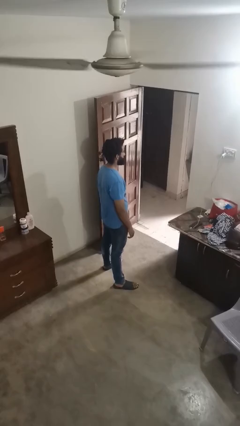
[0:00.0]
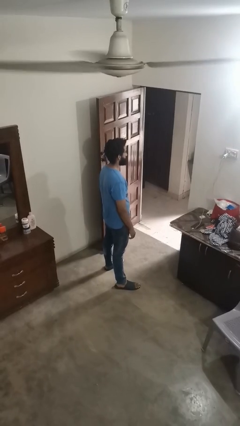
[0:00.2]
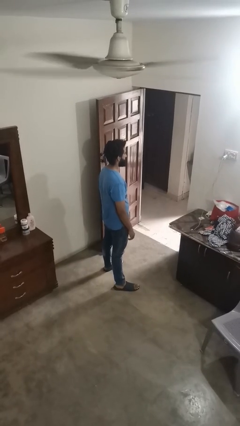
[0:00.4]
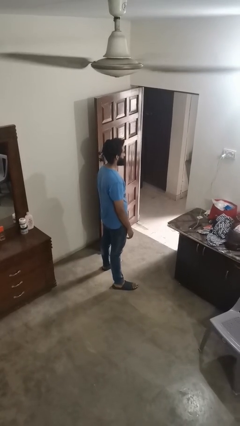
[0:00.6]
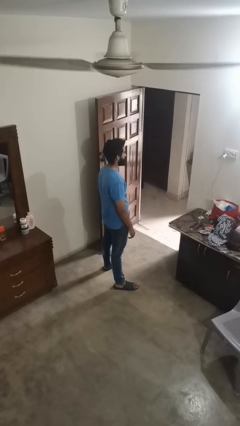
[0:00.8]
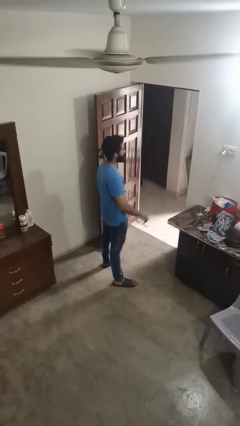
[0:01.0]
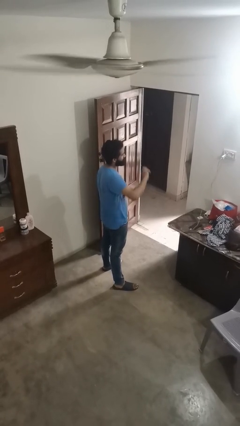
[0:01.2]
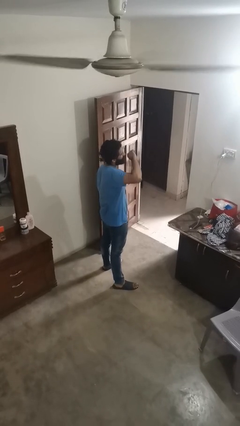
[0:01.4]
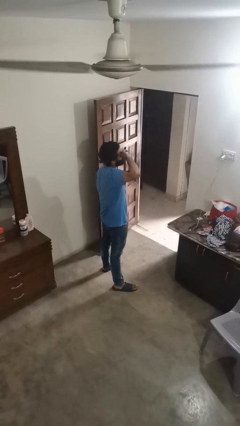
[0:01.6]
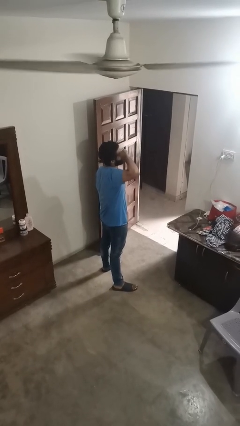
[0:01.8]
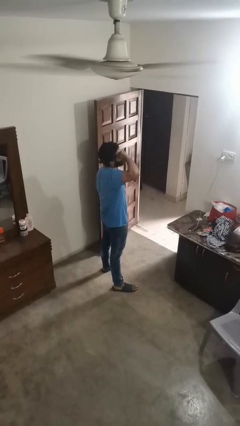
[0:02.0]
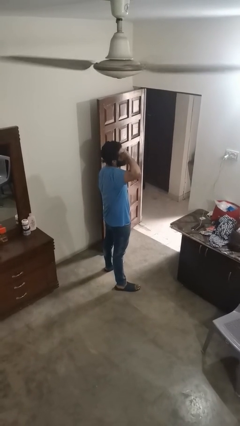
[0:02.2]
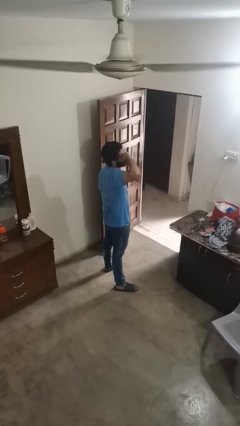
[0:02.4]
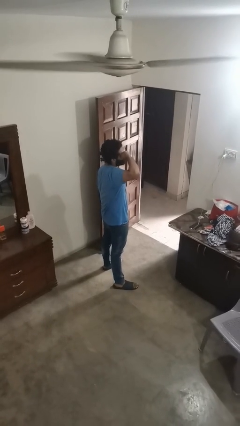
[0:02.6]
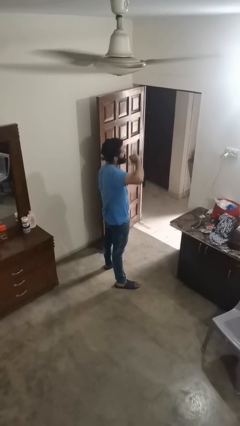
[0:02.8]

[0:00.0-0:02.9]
person rubs eyes

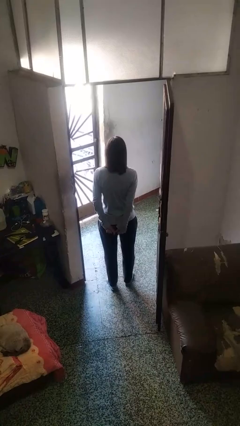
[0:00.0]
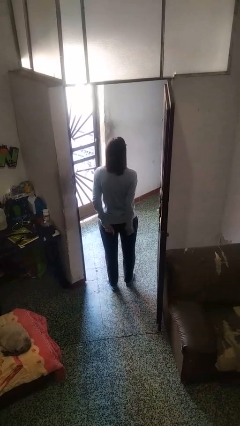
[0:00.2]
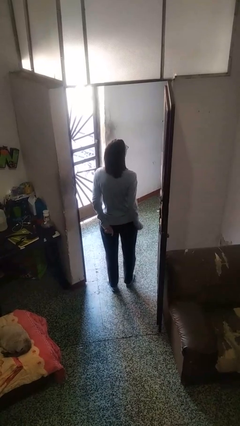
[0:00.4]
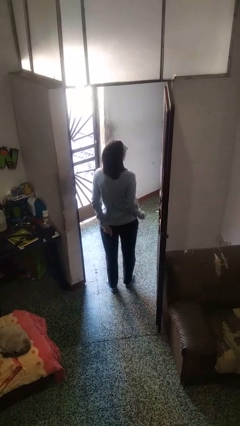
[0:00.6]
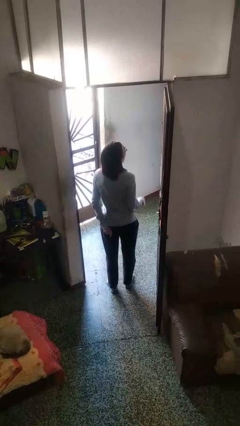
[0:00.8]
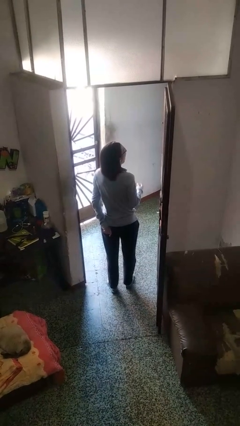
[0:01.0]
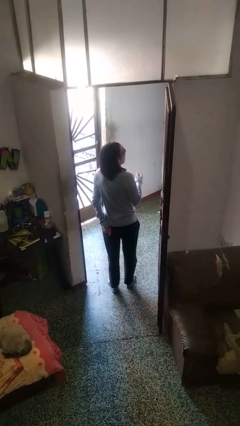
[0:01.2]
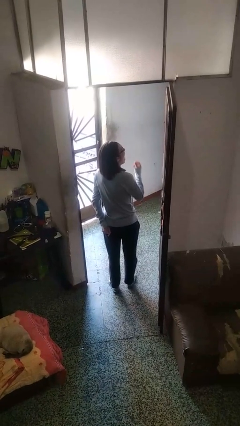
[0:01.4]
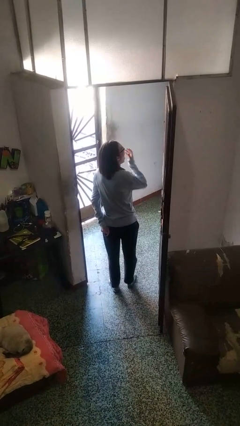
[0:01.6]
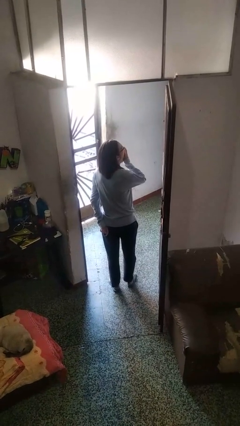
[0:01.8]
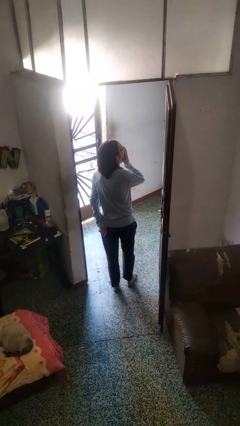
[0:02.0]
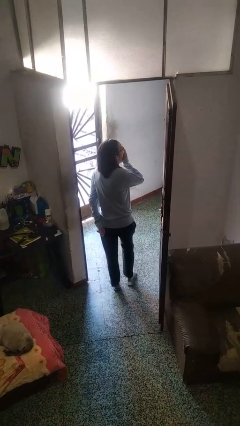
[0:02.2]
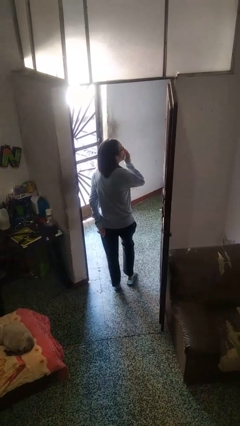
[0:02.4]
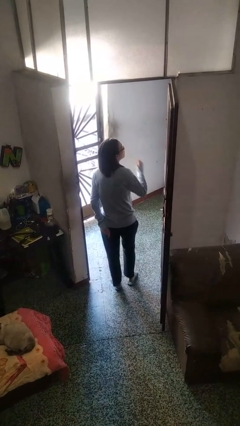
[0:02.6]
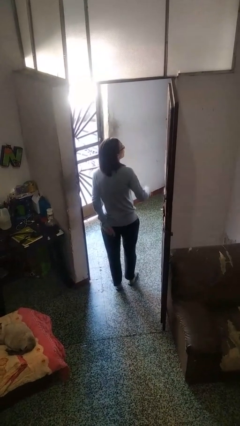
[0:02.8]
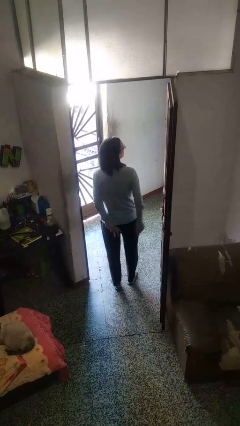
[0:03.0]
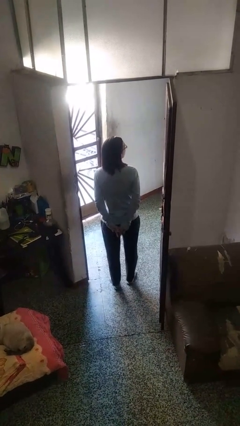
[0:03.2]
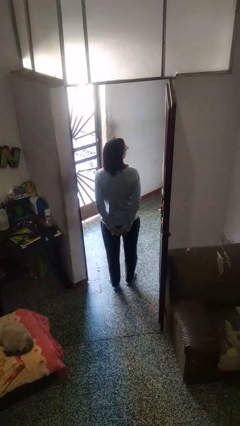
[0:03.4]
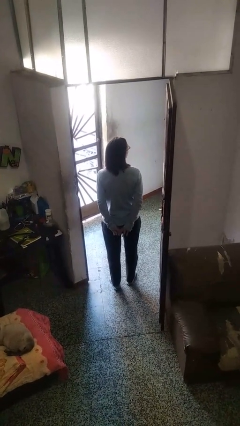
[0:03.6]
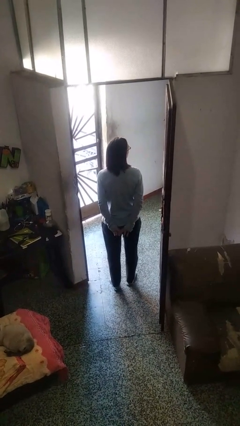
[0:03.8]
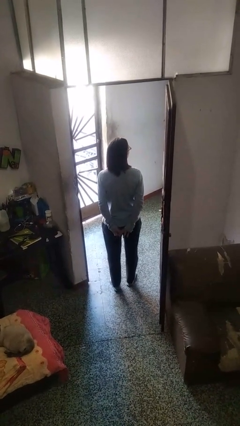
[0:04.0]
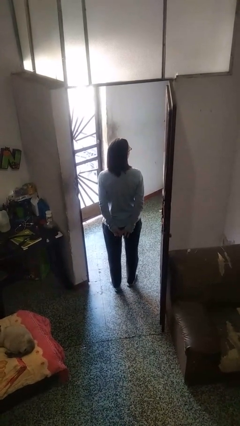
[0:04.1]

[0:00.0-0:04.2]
person yawns

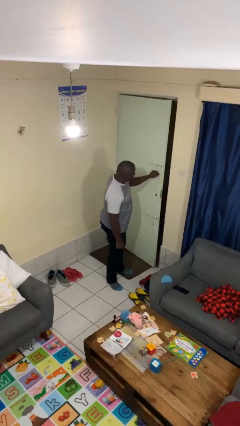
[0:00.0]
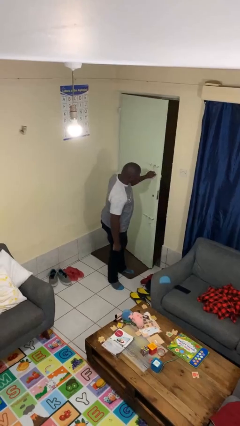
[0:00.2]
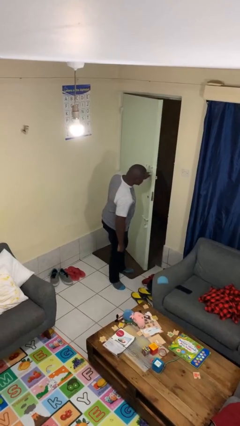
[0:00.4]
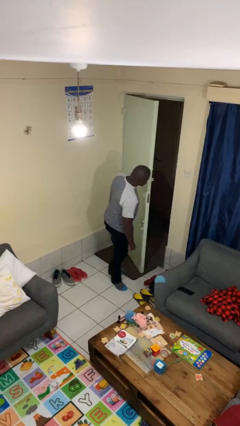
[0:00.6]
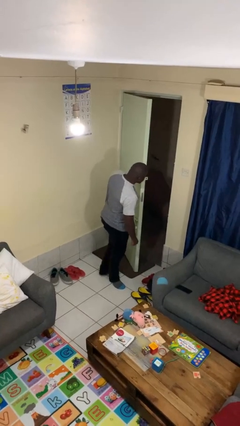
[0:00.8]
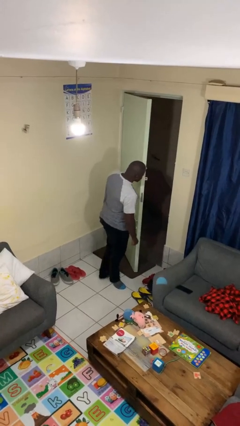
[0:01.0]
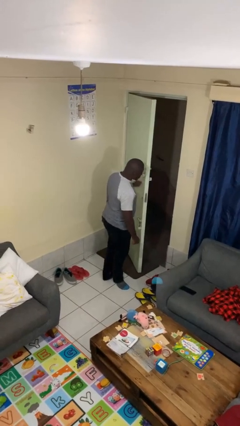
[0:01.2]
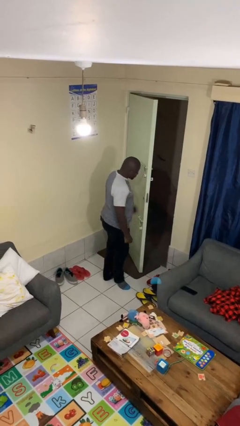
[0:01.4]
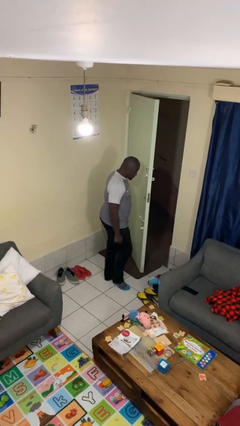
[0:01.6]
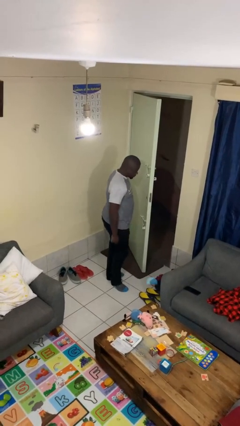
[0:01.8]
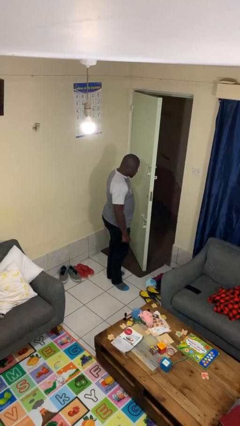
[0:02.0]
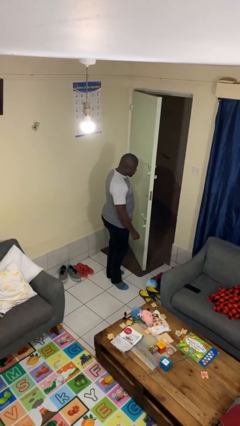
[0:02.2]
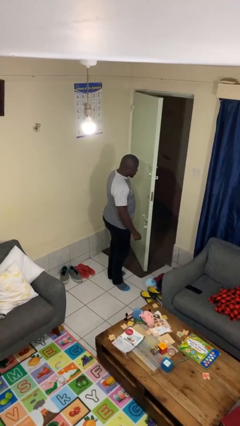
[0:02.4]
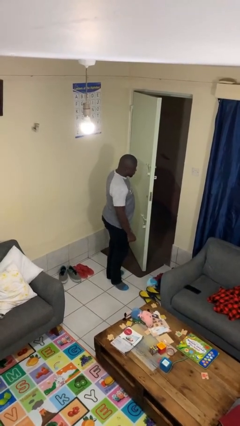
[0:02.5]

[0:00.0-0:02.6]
person opens facility door

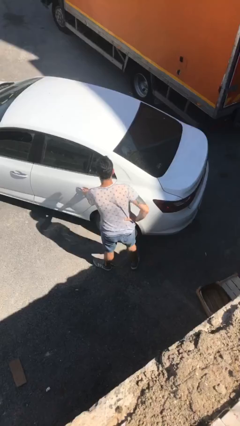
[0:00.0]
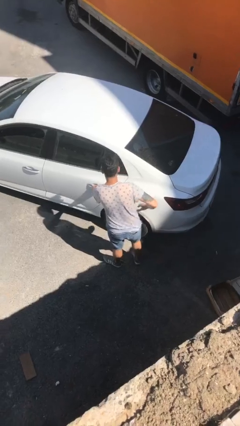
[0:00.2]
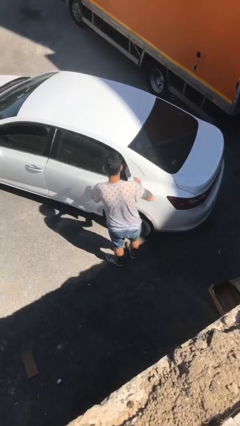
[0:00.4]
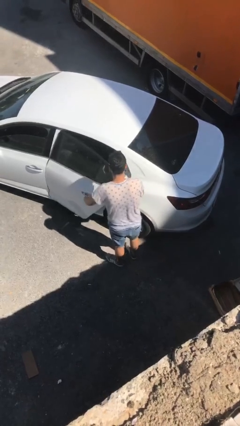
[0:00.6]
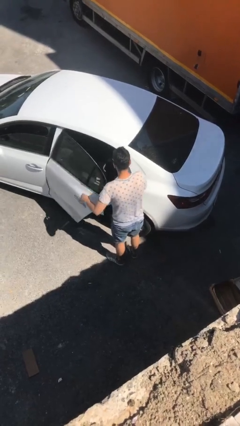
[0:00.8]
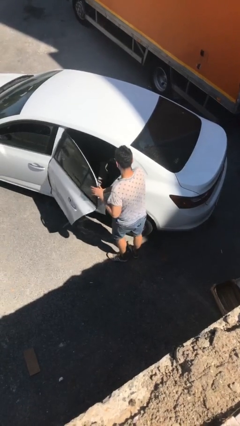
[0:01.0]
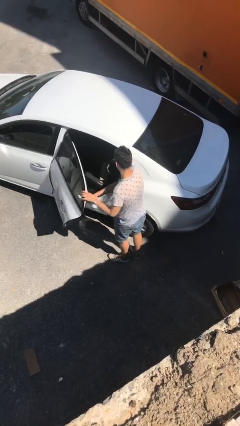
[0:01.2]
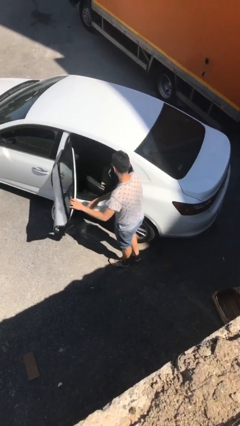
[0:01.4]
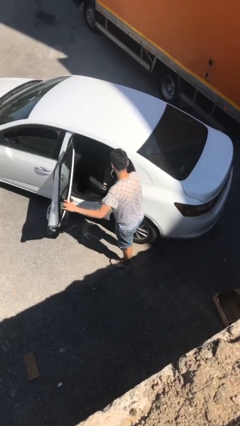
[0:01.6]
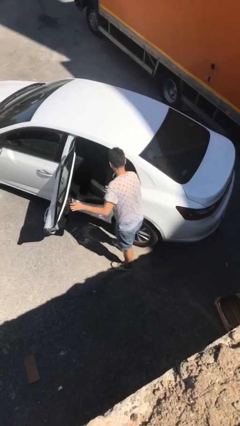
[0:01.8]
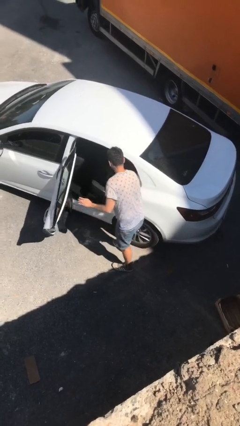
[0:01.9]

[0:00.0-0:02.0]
person opens car door

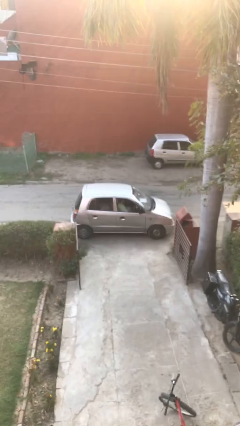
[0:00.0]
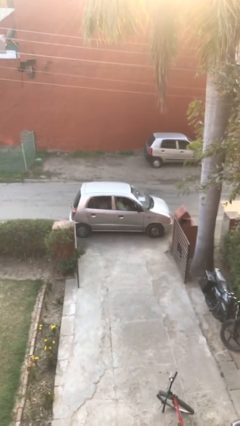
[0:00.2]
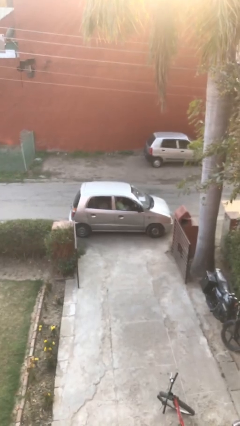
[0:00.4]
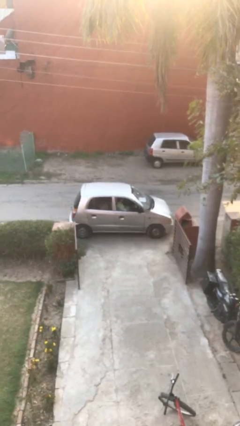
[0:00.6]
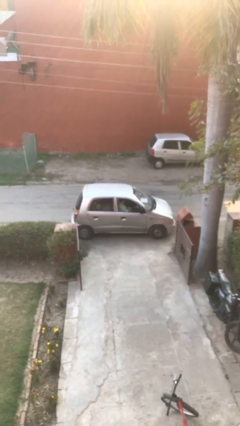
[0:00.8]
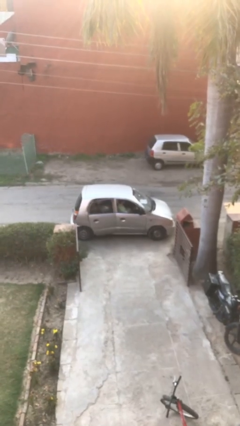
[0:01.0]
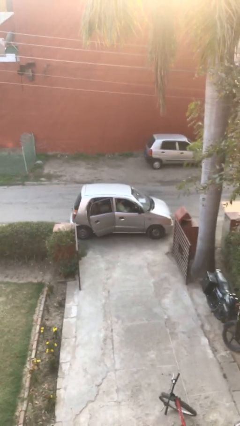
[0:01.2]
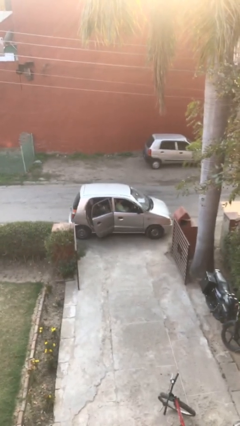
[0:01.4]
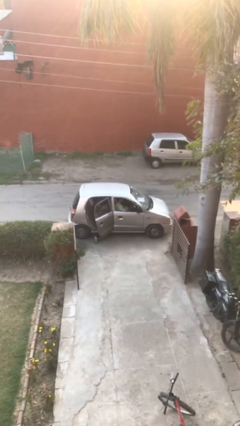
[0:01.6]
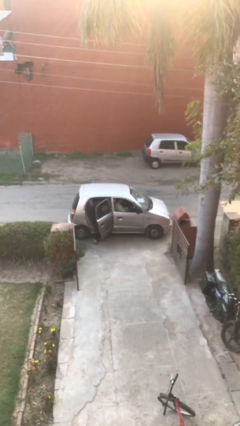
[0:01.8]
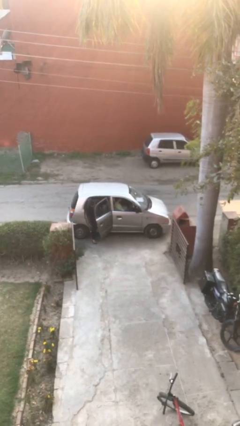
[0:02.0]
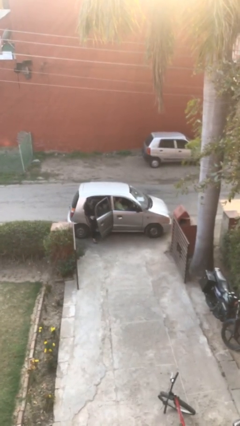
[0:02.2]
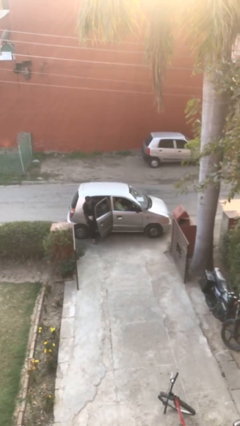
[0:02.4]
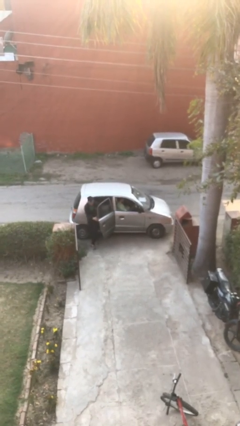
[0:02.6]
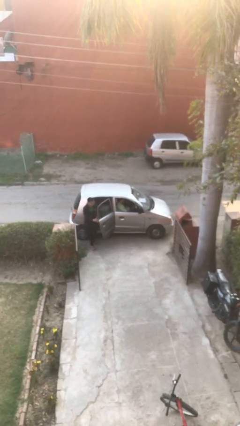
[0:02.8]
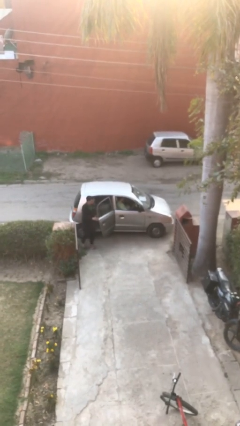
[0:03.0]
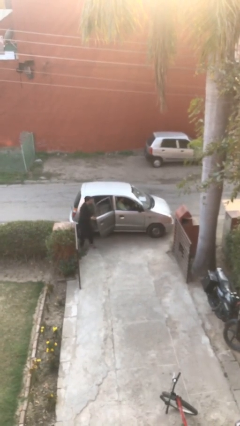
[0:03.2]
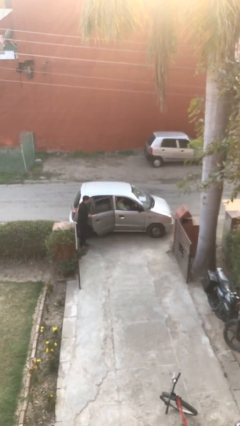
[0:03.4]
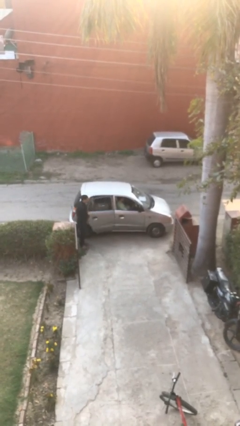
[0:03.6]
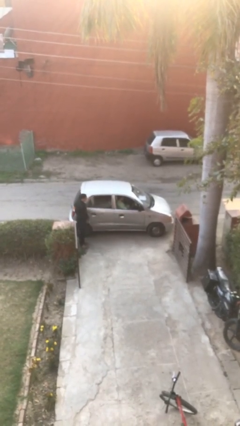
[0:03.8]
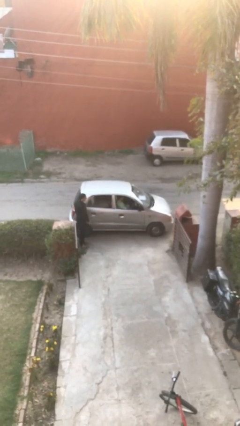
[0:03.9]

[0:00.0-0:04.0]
car drops off person

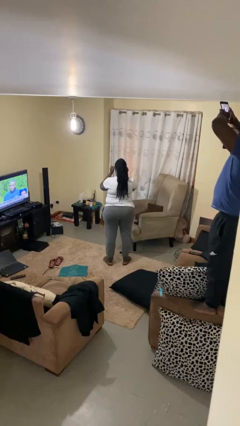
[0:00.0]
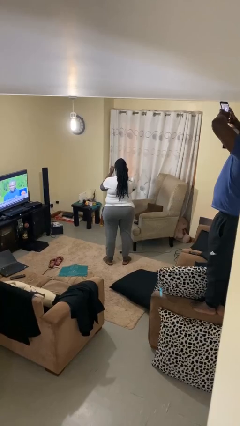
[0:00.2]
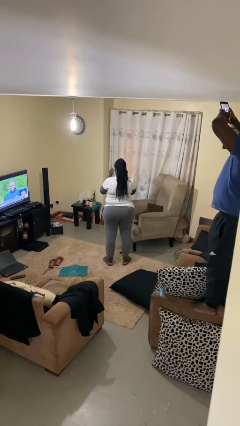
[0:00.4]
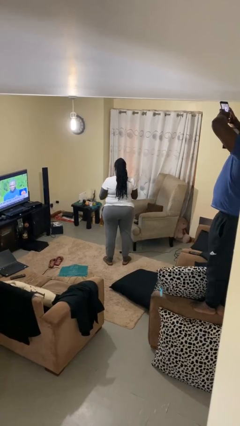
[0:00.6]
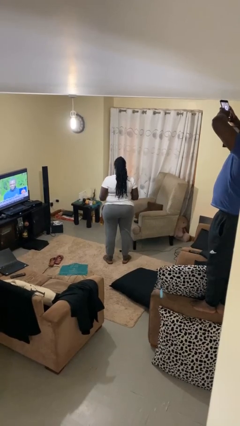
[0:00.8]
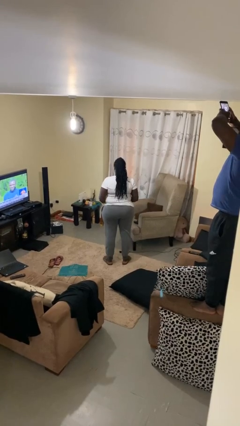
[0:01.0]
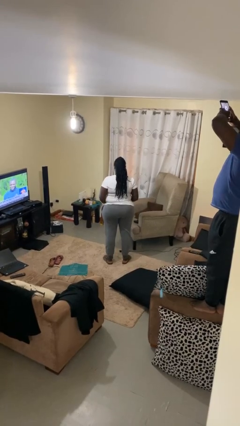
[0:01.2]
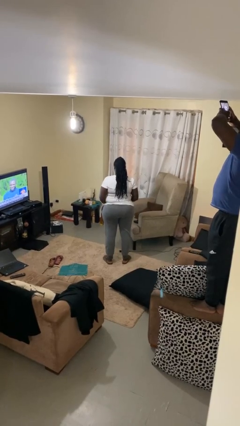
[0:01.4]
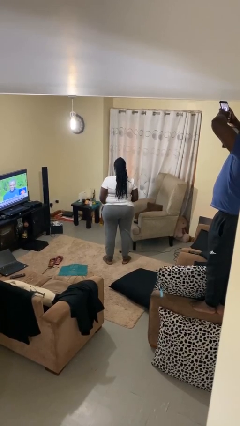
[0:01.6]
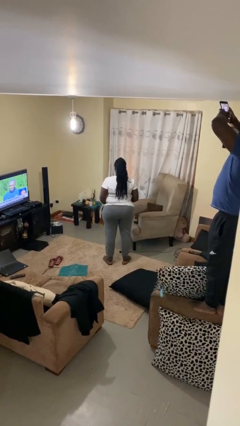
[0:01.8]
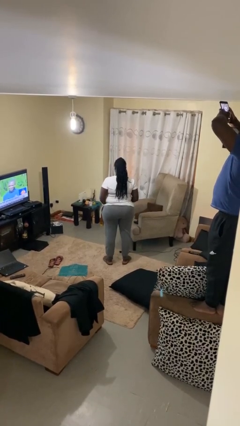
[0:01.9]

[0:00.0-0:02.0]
person takes off sunglasses
